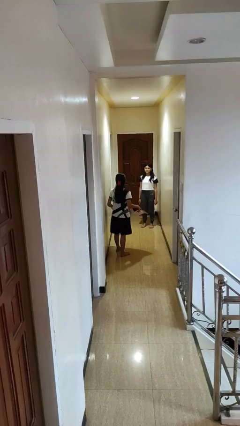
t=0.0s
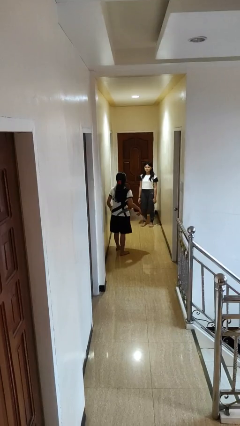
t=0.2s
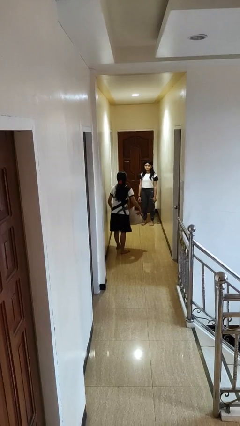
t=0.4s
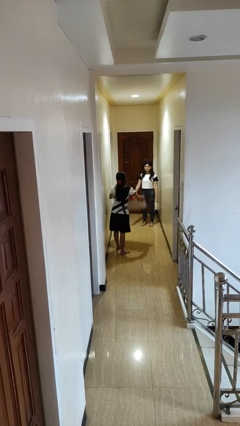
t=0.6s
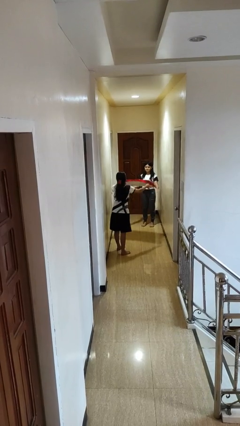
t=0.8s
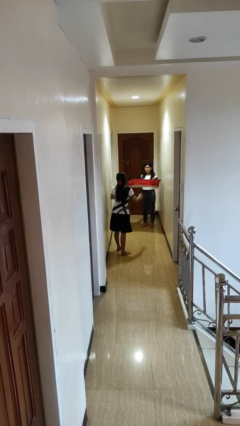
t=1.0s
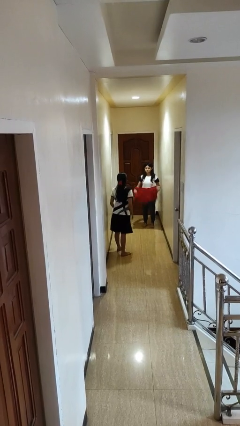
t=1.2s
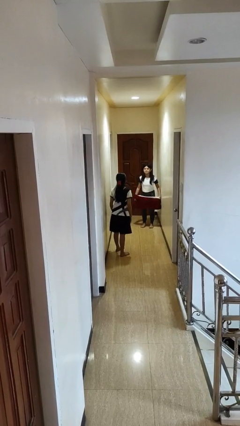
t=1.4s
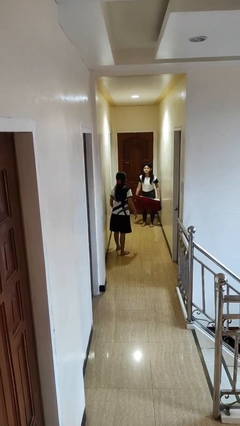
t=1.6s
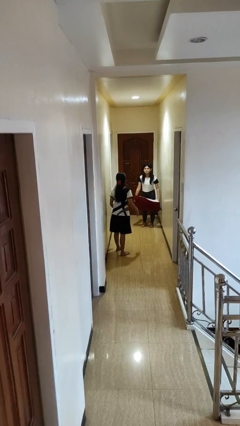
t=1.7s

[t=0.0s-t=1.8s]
person throws object to person

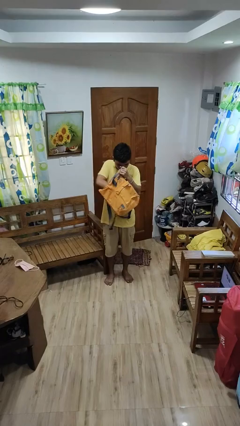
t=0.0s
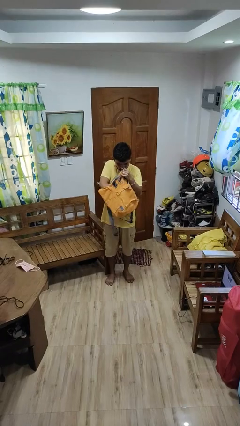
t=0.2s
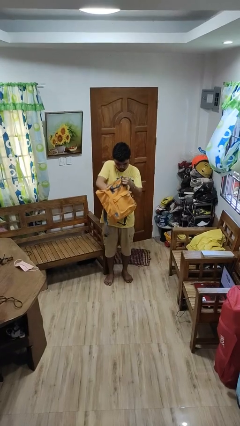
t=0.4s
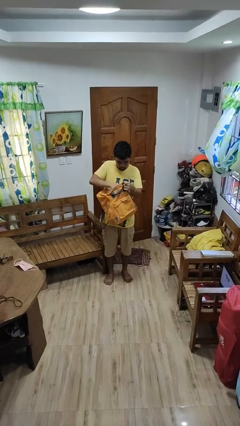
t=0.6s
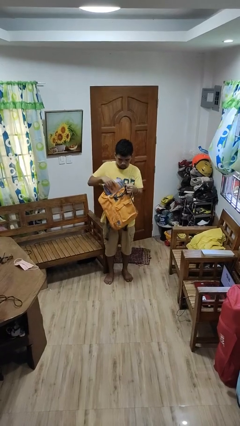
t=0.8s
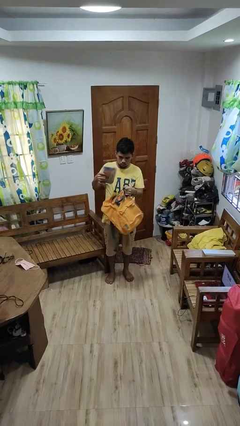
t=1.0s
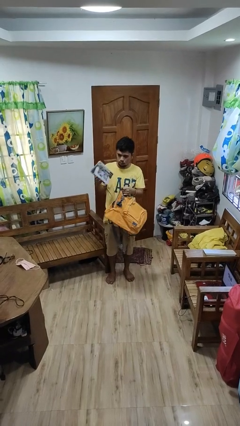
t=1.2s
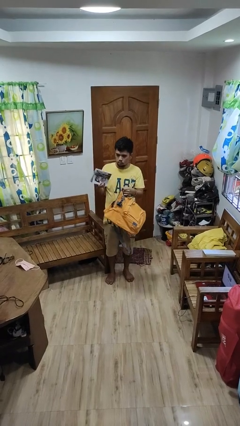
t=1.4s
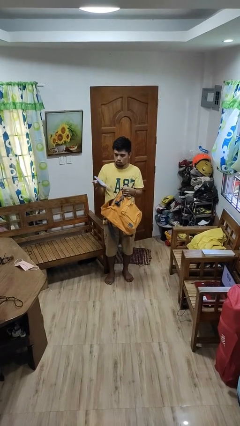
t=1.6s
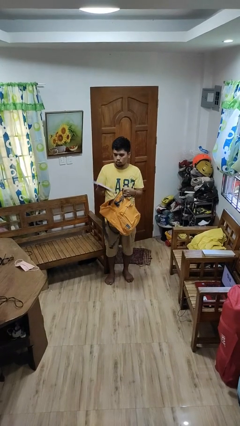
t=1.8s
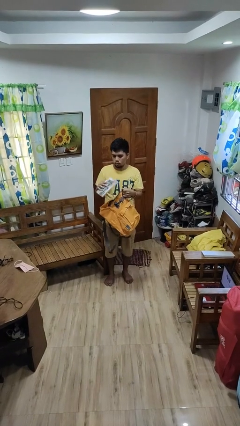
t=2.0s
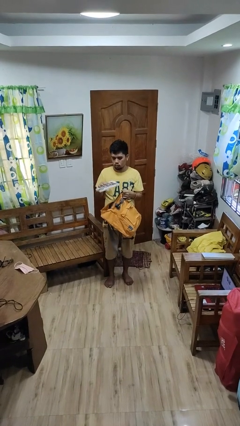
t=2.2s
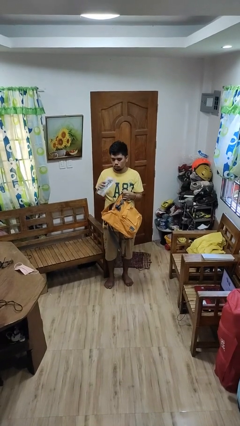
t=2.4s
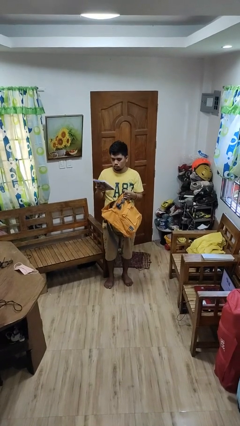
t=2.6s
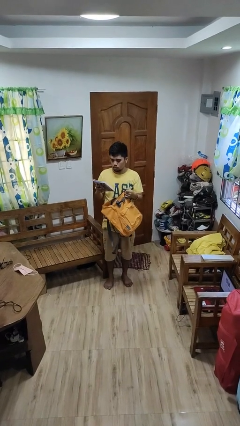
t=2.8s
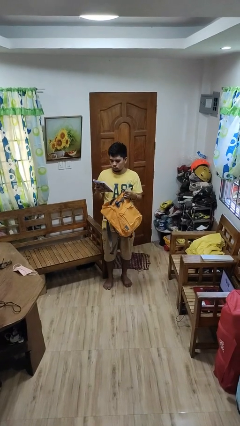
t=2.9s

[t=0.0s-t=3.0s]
person takes object from backpack

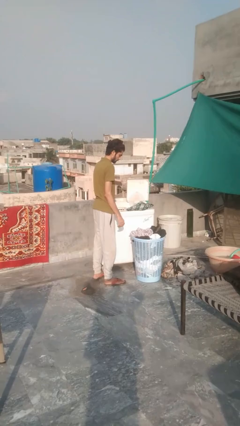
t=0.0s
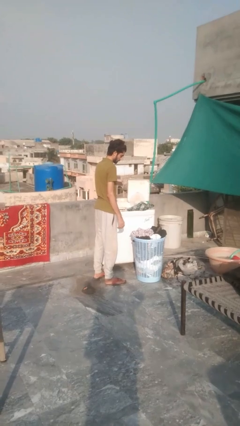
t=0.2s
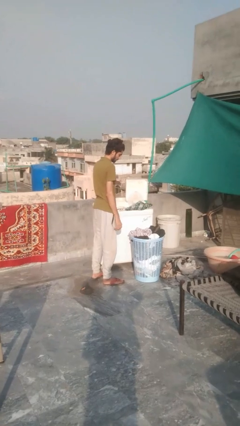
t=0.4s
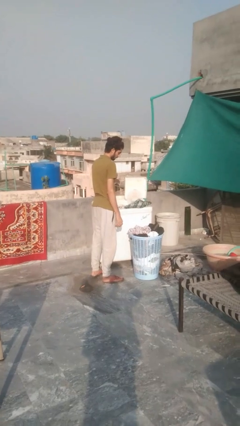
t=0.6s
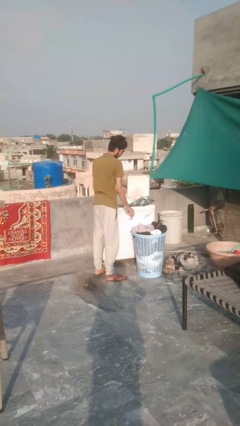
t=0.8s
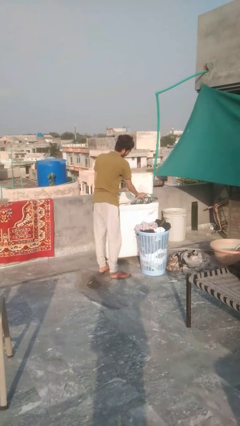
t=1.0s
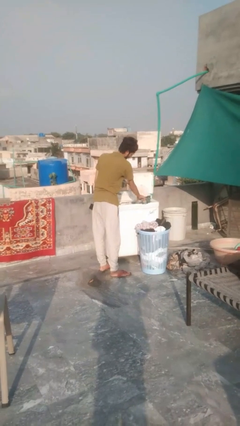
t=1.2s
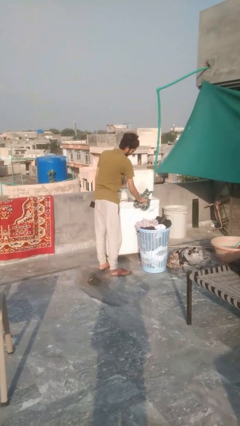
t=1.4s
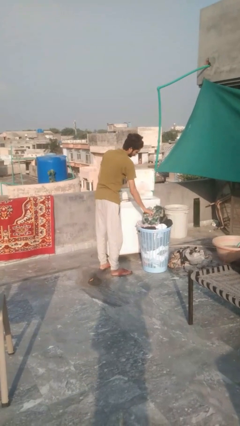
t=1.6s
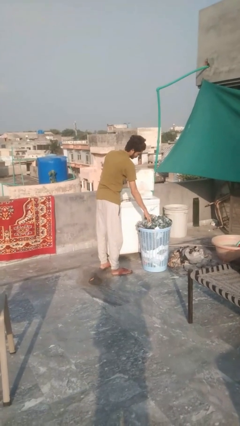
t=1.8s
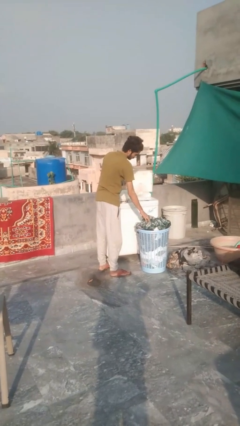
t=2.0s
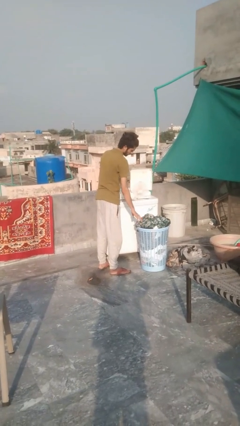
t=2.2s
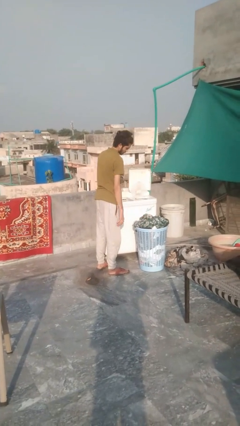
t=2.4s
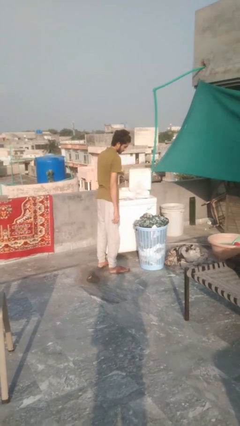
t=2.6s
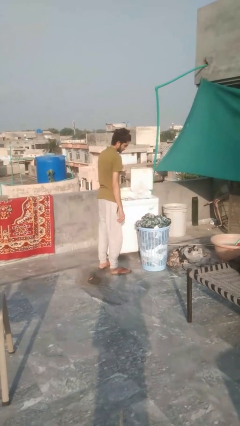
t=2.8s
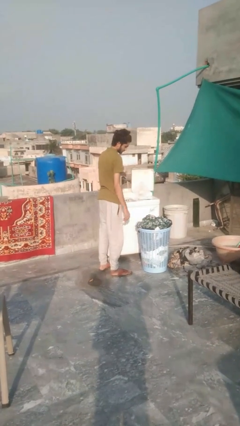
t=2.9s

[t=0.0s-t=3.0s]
person unloads clotheswasher

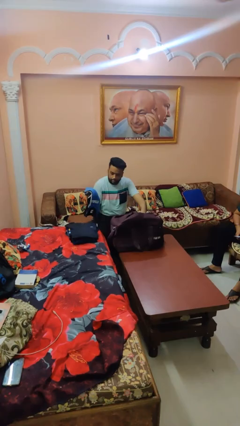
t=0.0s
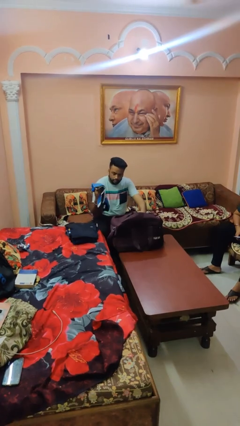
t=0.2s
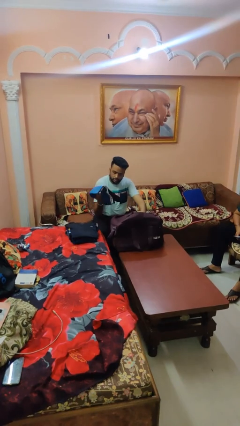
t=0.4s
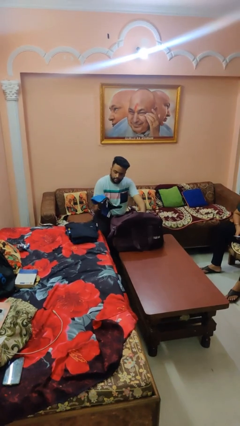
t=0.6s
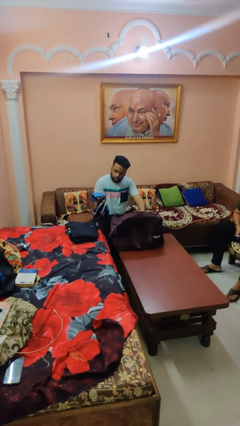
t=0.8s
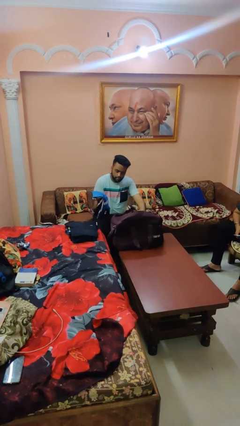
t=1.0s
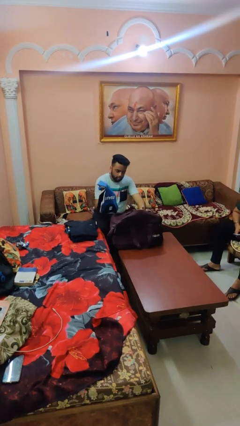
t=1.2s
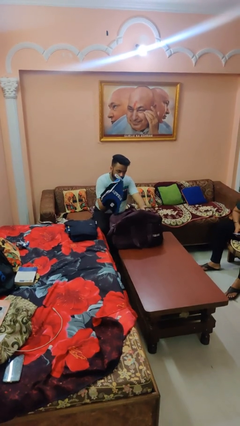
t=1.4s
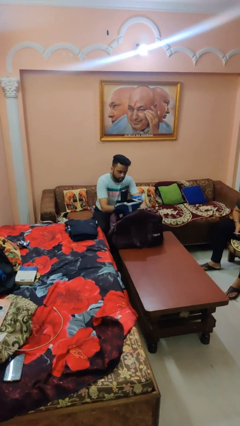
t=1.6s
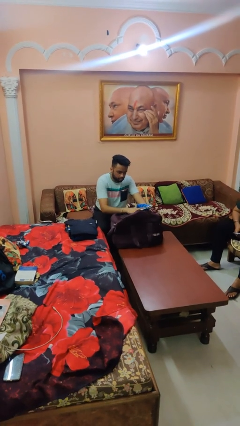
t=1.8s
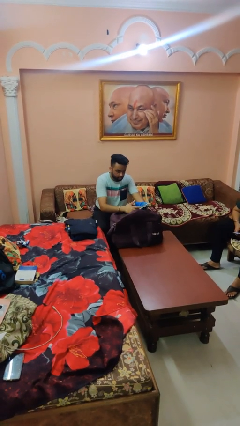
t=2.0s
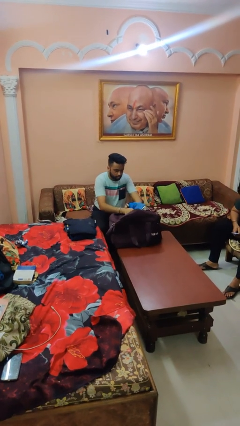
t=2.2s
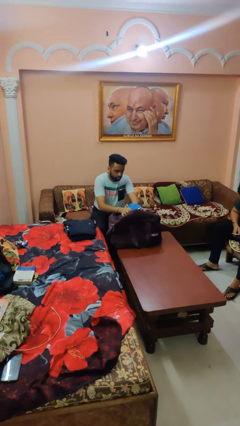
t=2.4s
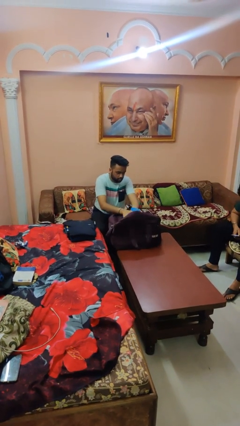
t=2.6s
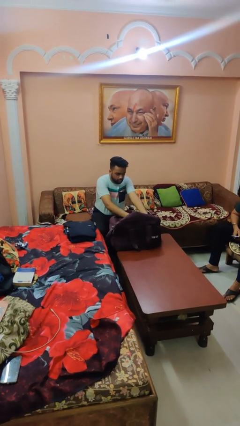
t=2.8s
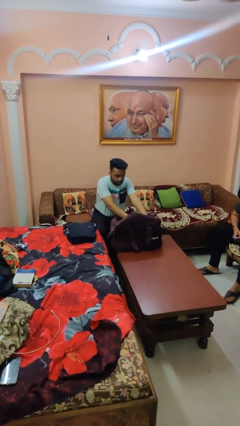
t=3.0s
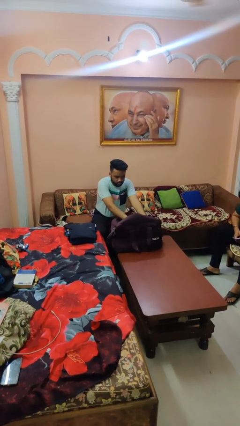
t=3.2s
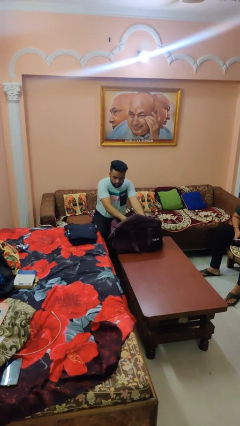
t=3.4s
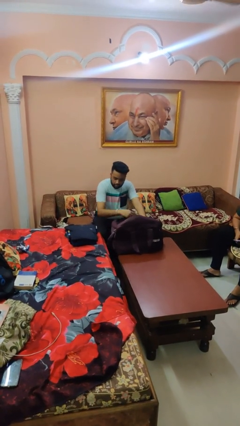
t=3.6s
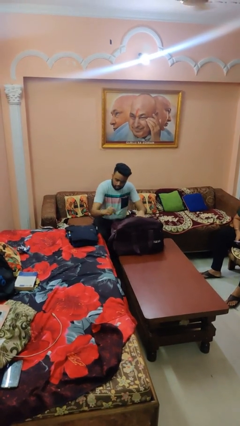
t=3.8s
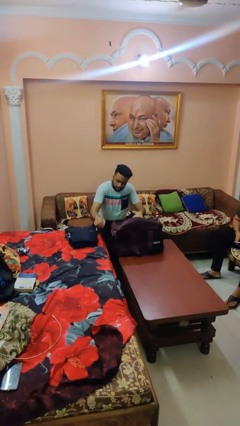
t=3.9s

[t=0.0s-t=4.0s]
person loads clothes into suitcase

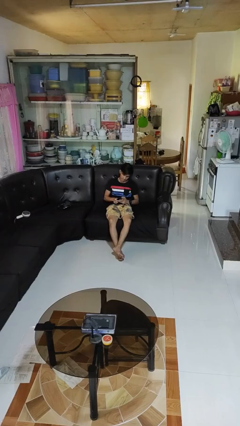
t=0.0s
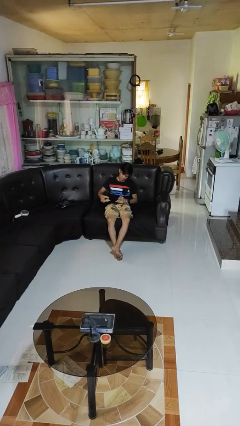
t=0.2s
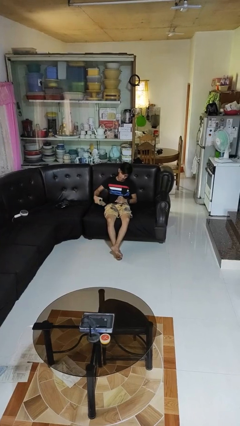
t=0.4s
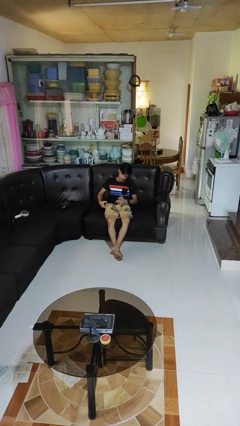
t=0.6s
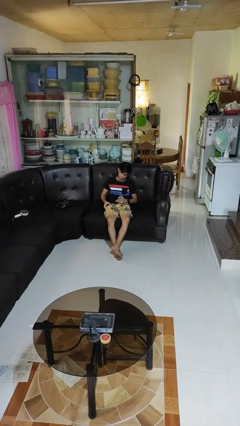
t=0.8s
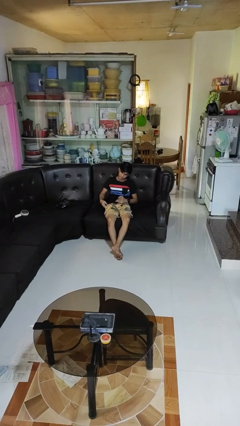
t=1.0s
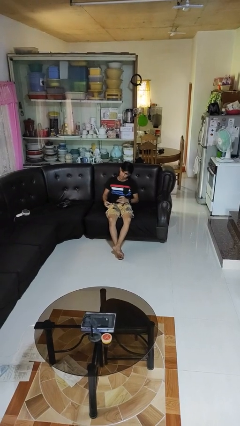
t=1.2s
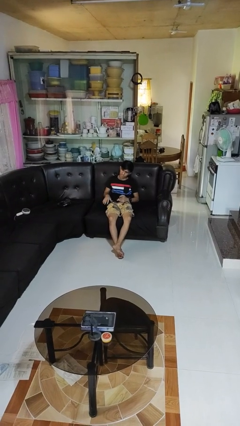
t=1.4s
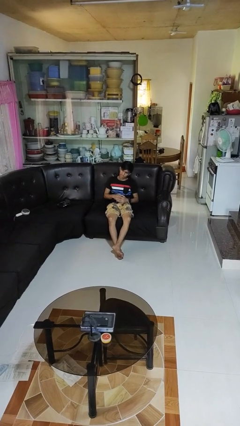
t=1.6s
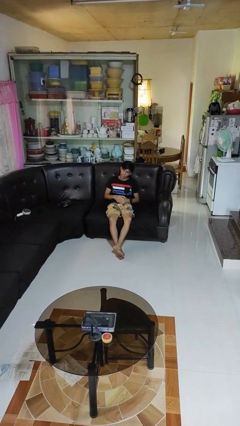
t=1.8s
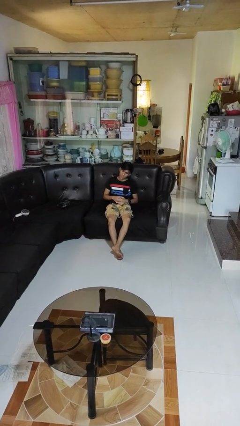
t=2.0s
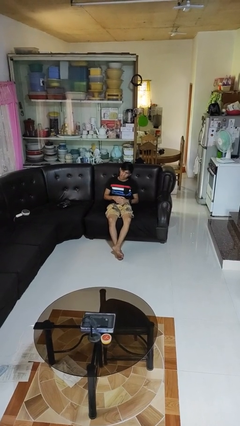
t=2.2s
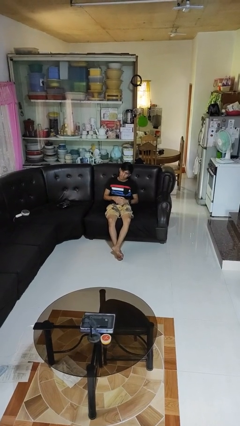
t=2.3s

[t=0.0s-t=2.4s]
person puts phone into pocket

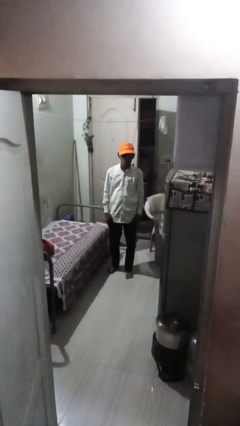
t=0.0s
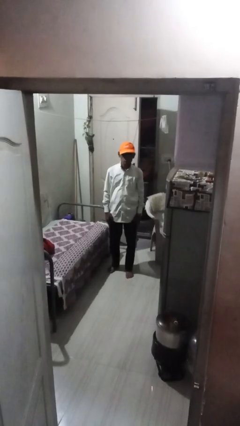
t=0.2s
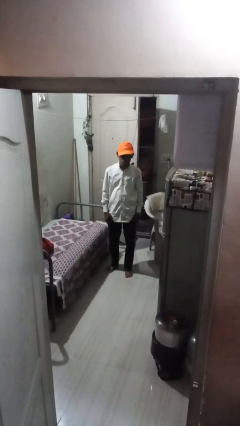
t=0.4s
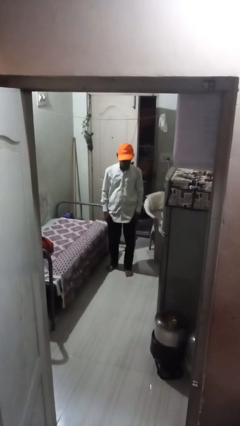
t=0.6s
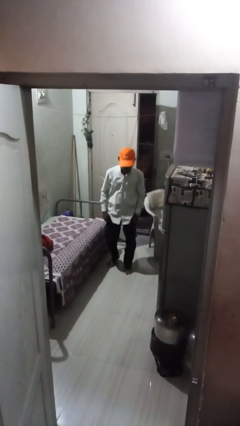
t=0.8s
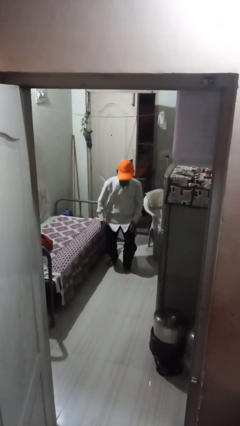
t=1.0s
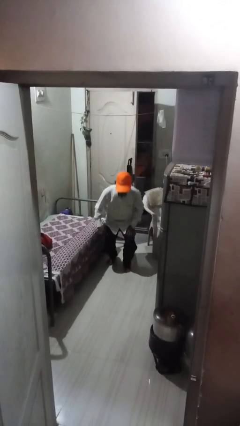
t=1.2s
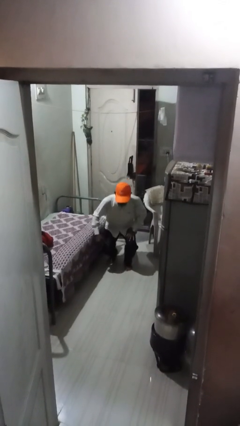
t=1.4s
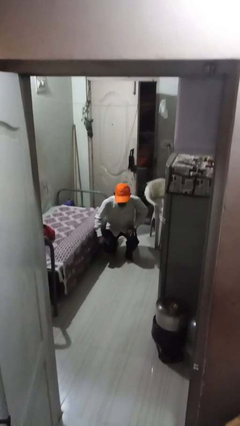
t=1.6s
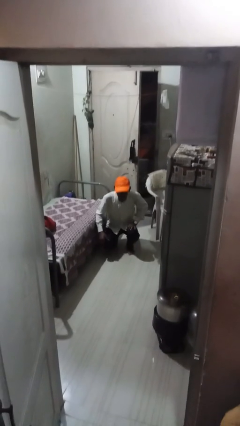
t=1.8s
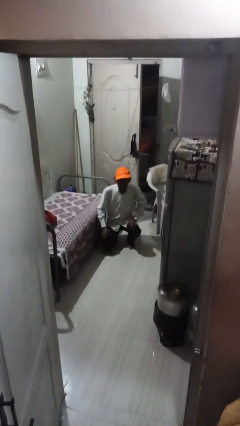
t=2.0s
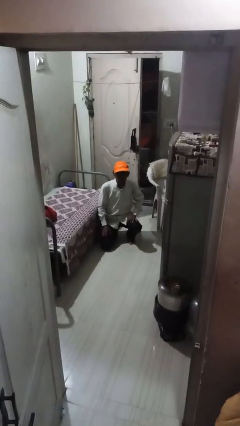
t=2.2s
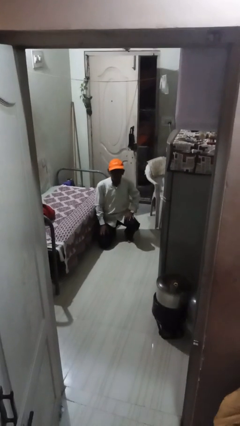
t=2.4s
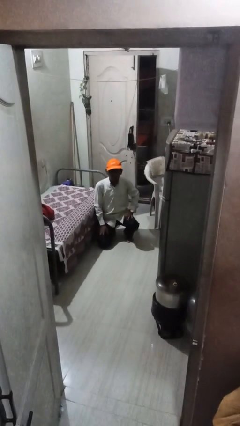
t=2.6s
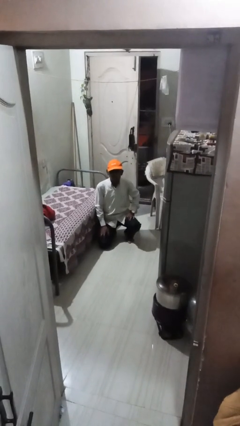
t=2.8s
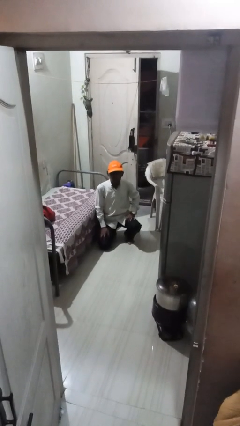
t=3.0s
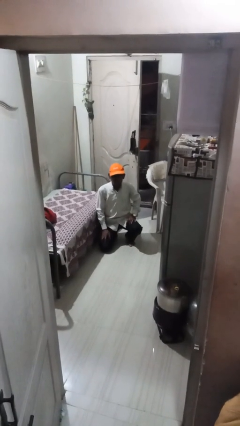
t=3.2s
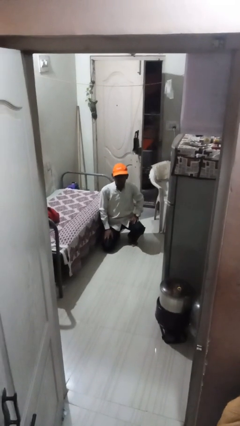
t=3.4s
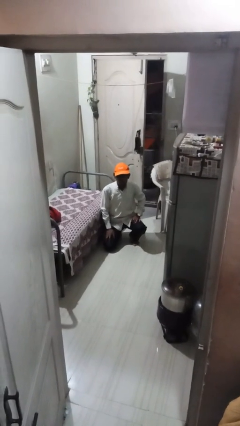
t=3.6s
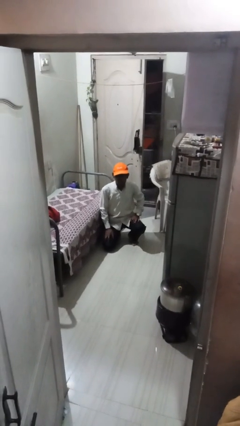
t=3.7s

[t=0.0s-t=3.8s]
person kneels
